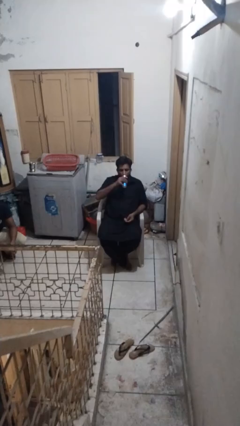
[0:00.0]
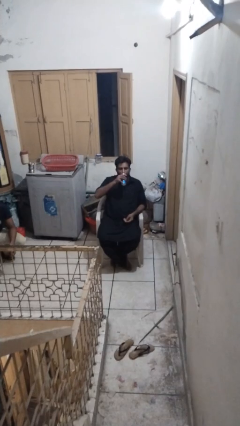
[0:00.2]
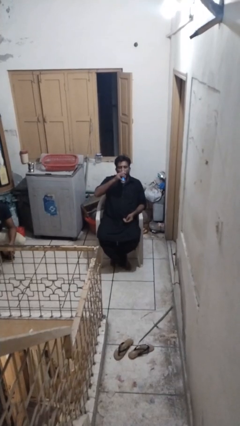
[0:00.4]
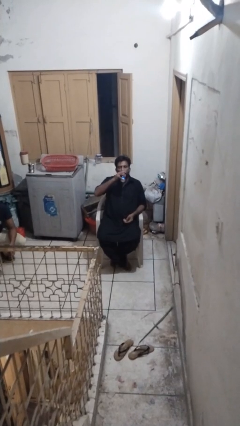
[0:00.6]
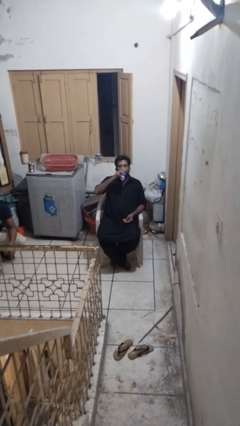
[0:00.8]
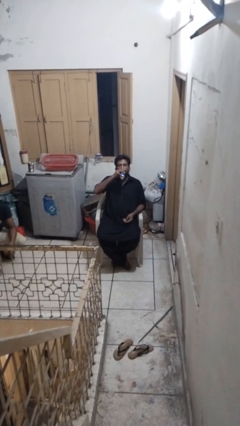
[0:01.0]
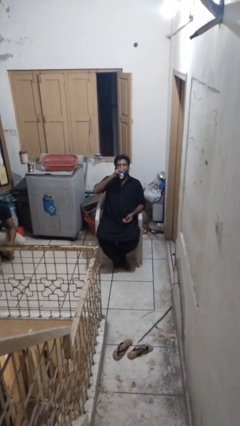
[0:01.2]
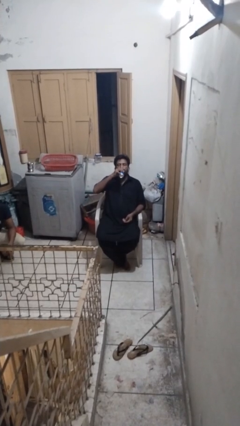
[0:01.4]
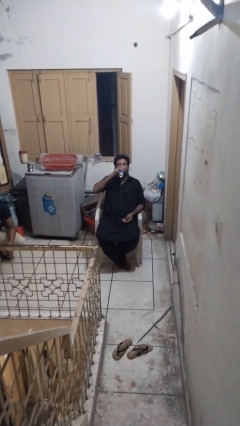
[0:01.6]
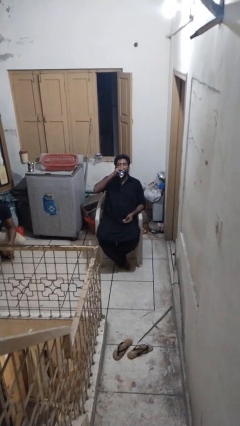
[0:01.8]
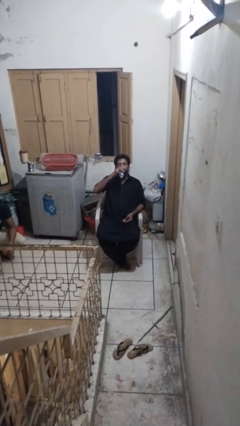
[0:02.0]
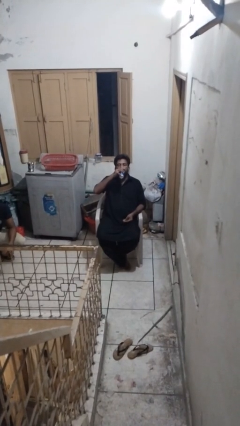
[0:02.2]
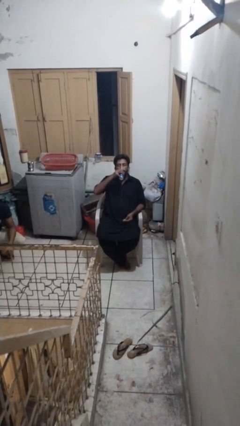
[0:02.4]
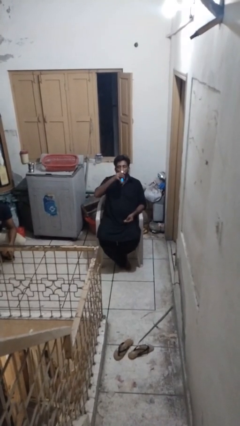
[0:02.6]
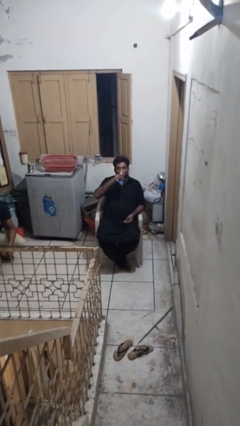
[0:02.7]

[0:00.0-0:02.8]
person drinks from beverage can

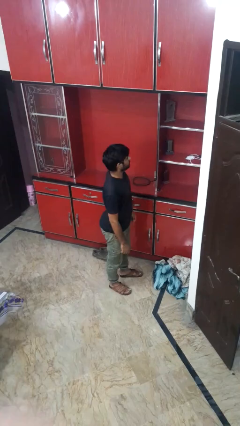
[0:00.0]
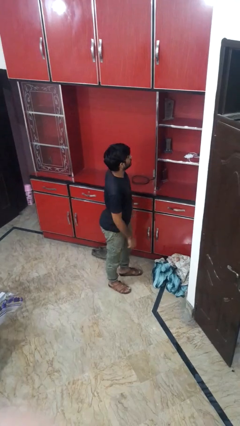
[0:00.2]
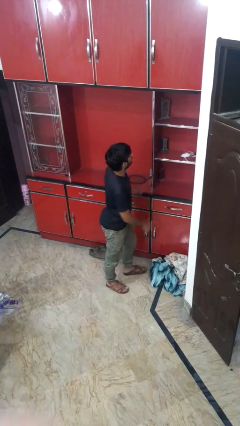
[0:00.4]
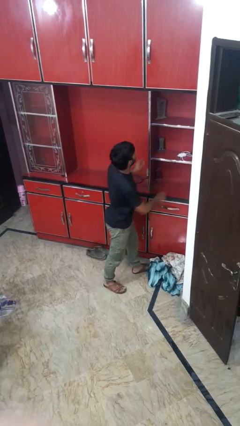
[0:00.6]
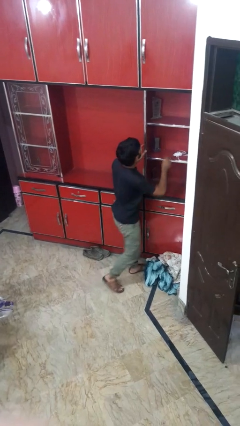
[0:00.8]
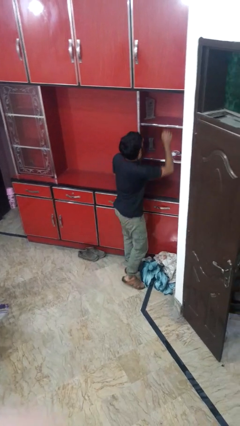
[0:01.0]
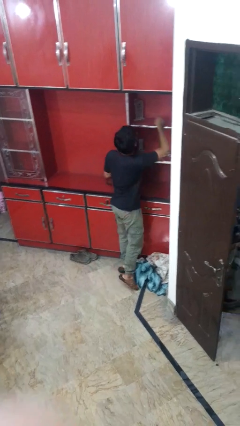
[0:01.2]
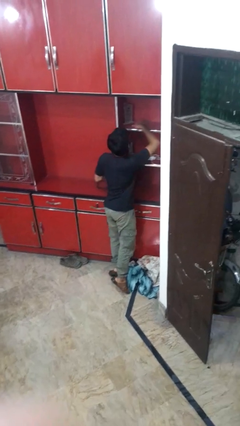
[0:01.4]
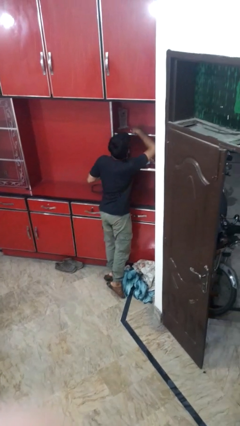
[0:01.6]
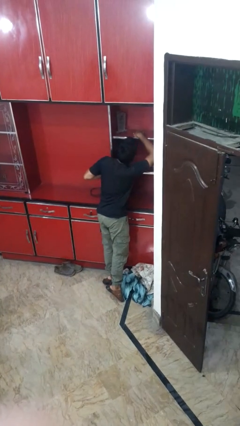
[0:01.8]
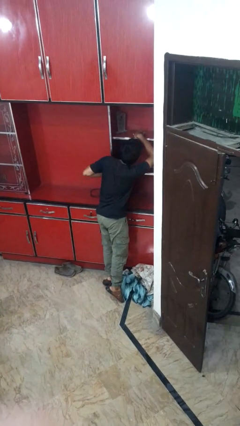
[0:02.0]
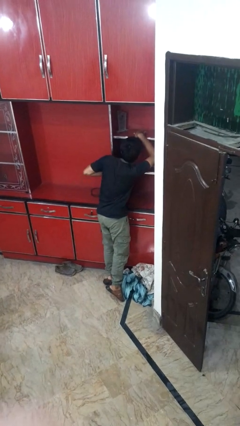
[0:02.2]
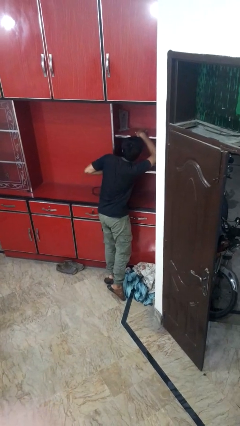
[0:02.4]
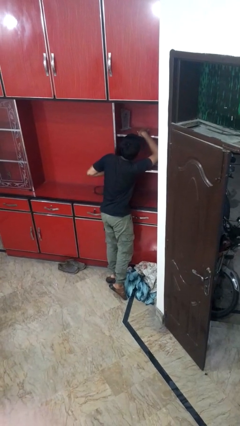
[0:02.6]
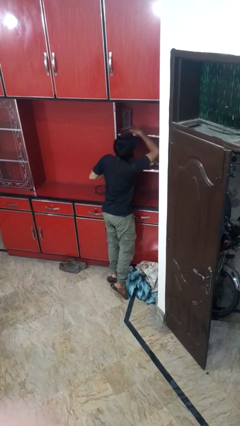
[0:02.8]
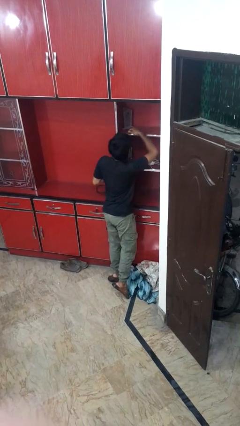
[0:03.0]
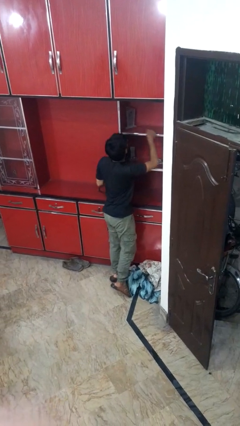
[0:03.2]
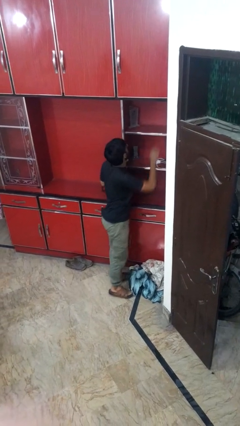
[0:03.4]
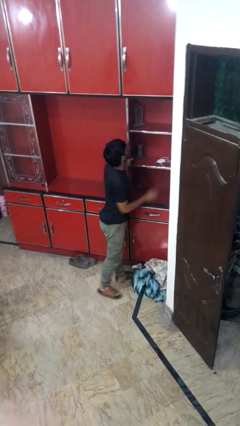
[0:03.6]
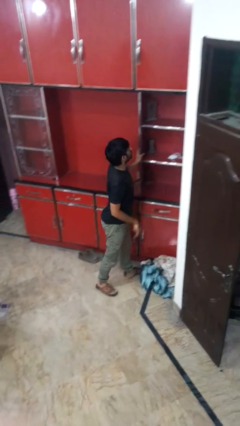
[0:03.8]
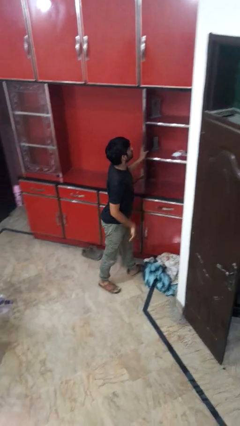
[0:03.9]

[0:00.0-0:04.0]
person searches in cabinet

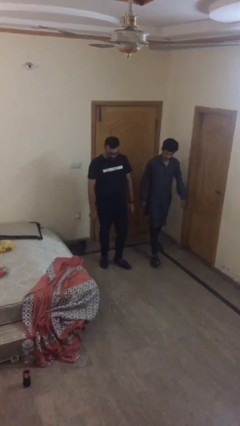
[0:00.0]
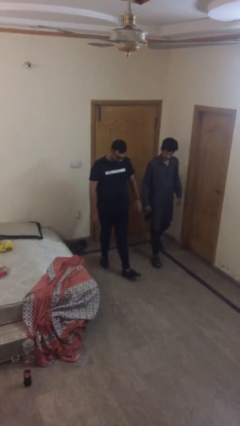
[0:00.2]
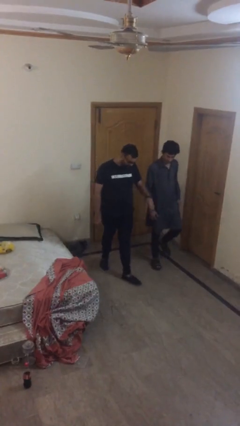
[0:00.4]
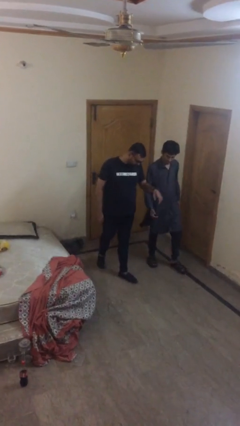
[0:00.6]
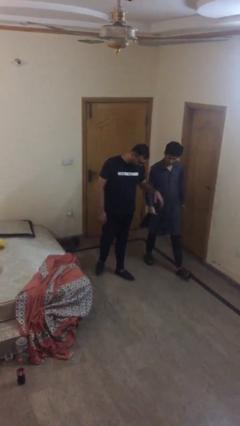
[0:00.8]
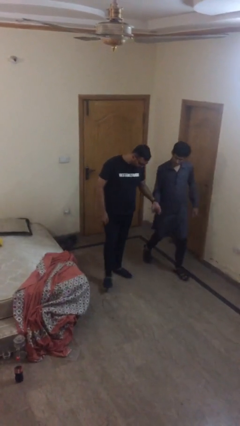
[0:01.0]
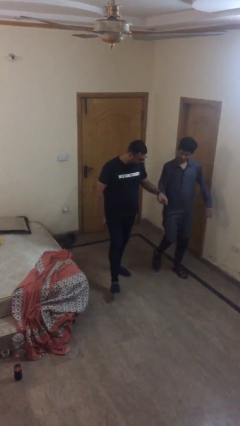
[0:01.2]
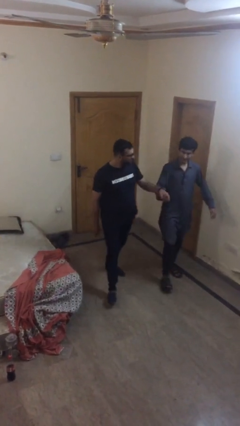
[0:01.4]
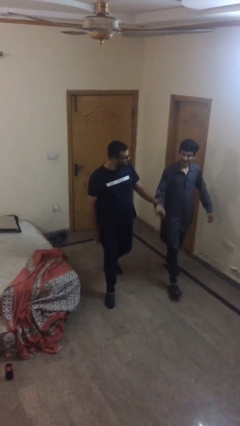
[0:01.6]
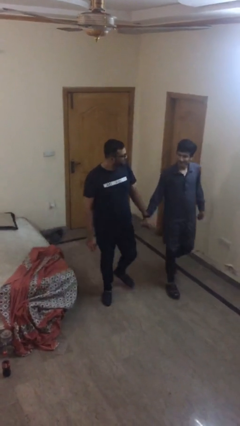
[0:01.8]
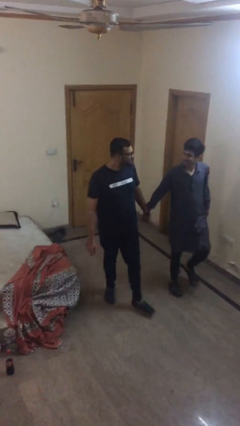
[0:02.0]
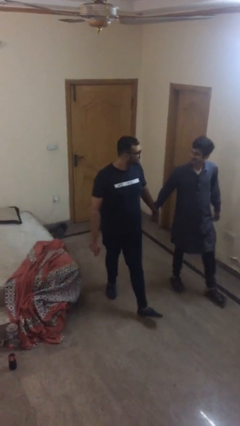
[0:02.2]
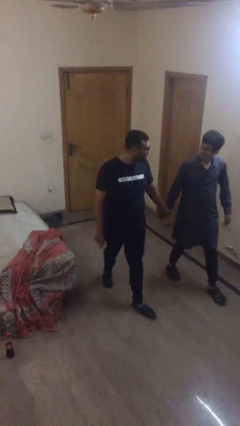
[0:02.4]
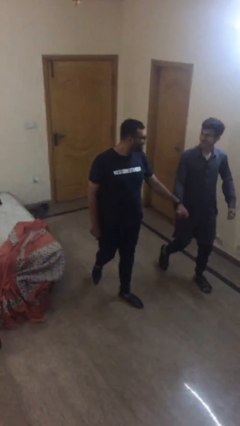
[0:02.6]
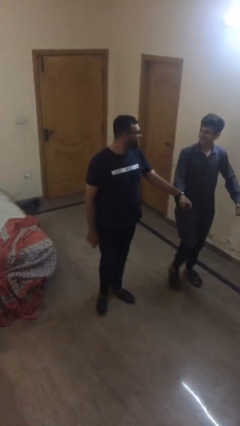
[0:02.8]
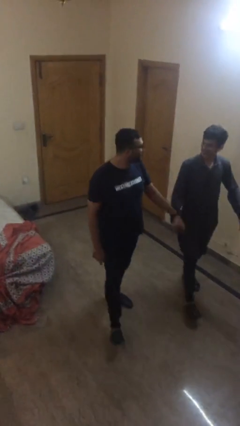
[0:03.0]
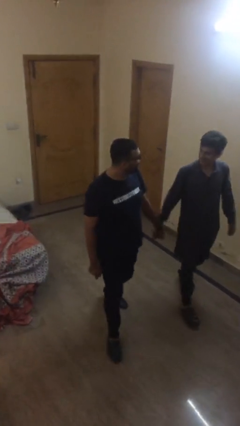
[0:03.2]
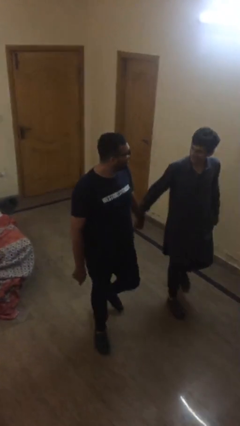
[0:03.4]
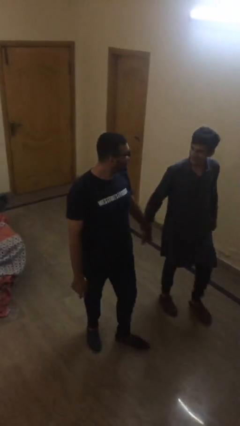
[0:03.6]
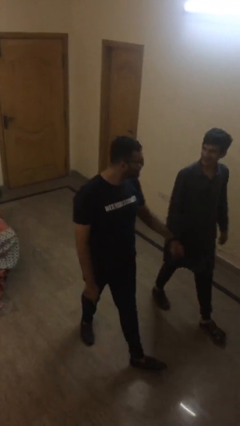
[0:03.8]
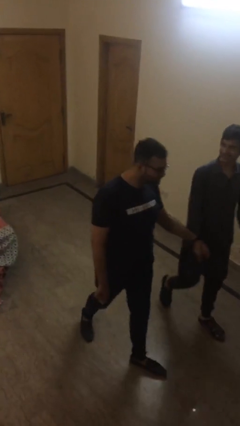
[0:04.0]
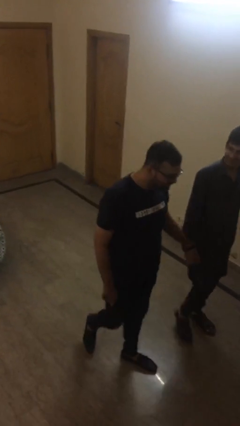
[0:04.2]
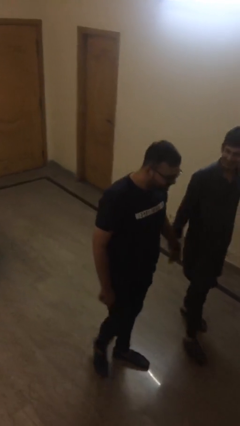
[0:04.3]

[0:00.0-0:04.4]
person holds hand

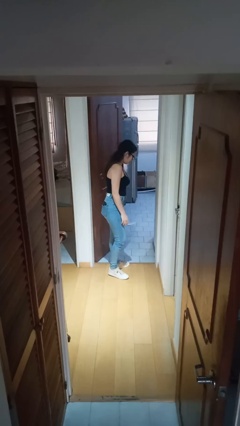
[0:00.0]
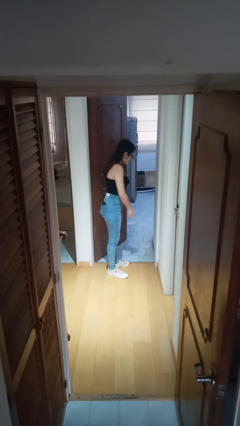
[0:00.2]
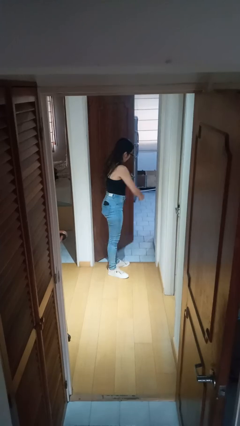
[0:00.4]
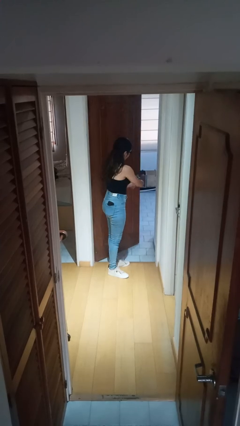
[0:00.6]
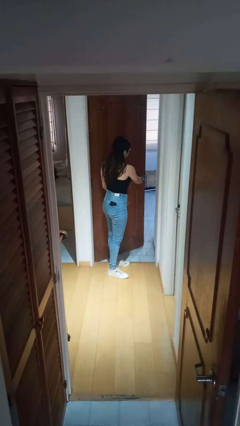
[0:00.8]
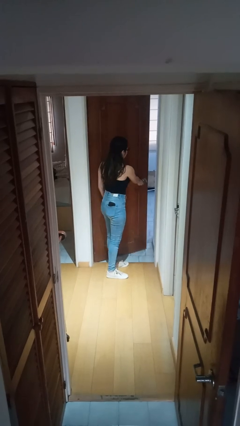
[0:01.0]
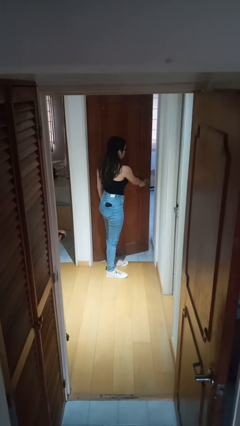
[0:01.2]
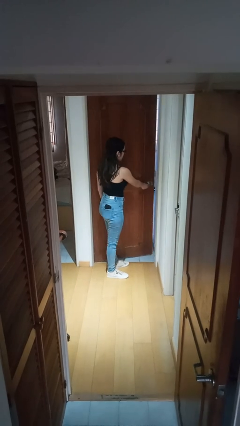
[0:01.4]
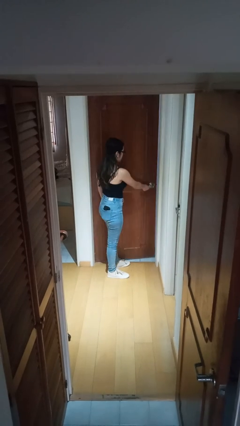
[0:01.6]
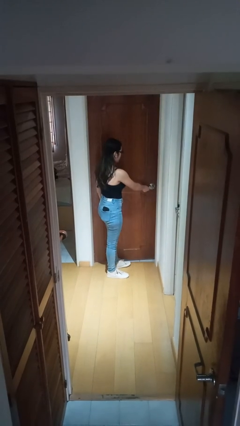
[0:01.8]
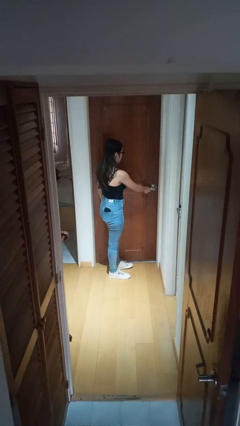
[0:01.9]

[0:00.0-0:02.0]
person closes facility door

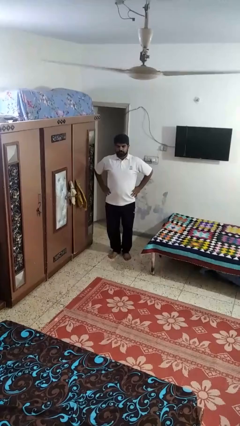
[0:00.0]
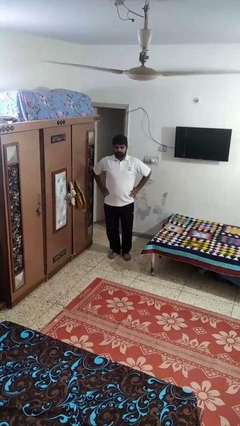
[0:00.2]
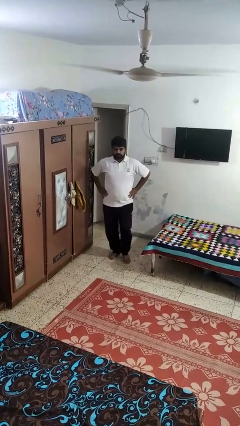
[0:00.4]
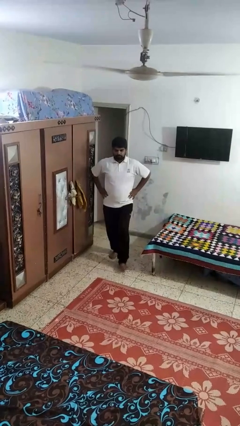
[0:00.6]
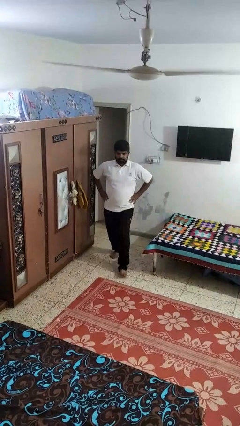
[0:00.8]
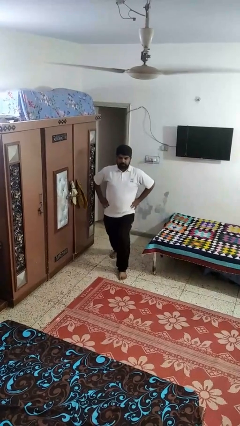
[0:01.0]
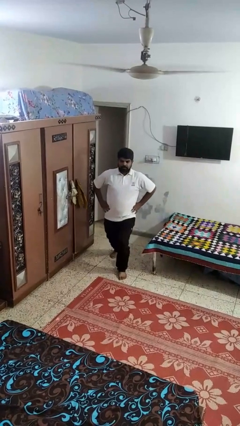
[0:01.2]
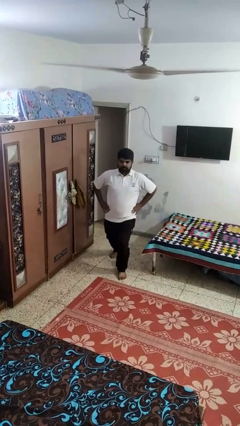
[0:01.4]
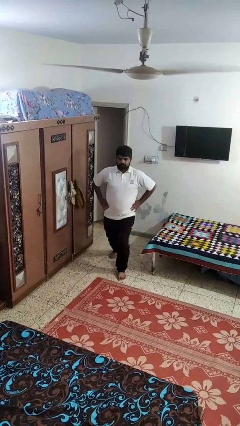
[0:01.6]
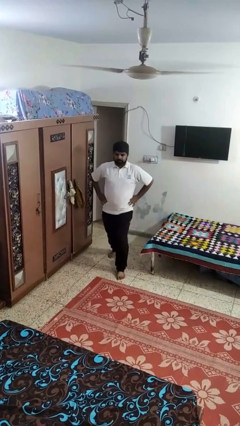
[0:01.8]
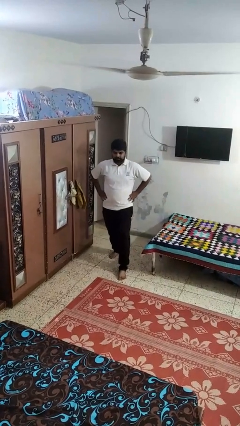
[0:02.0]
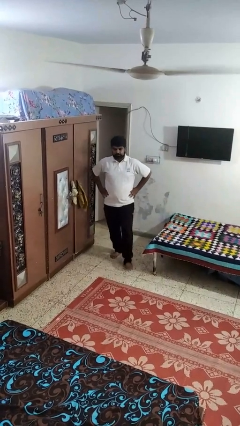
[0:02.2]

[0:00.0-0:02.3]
person exercises with lunges

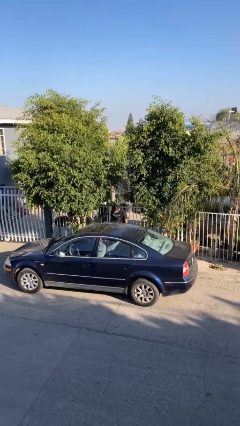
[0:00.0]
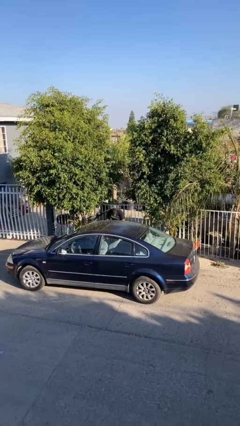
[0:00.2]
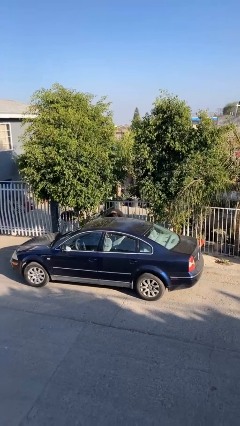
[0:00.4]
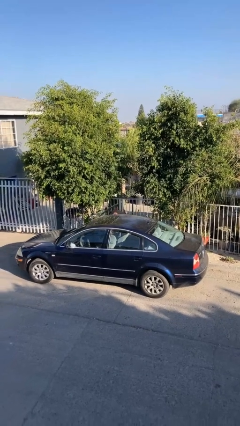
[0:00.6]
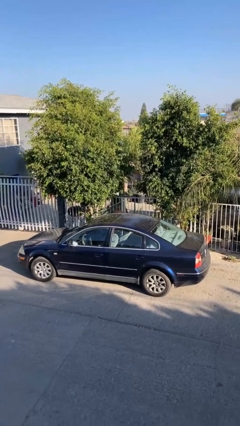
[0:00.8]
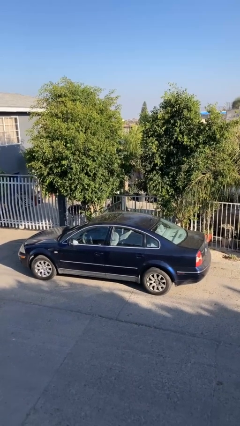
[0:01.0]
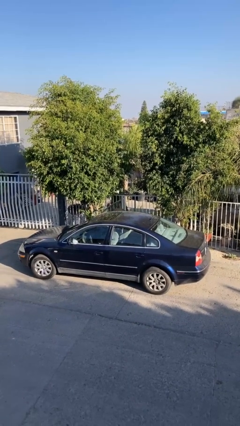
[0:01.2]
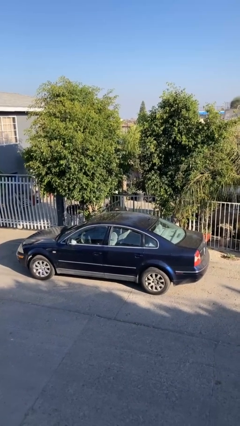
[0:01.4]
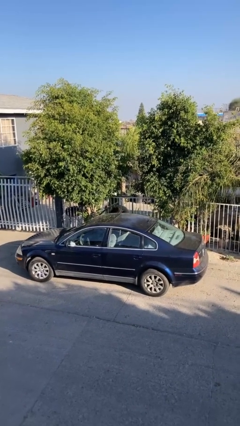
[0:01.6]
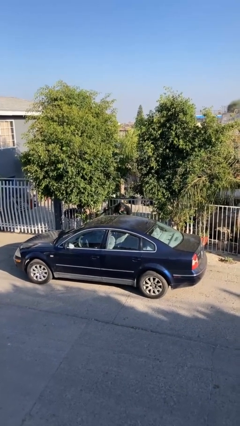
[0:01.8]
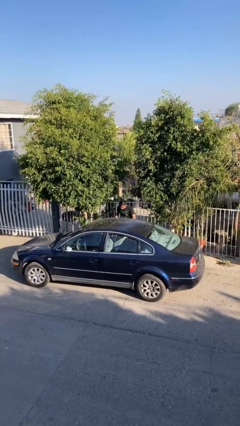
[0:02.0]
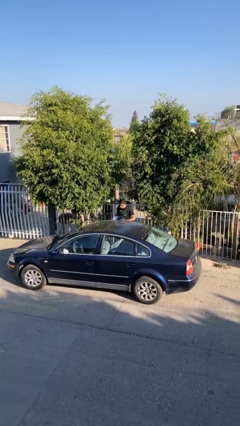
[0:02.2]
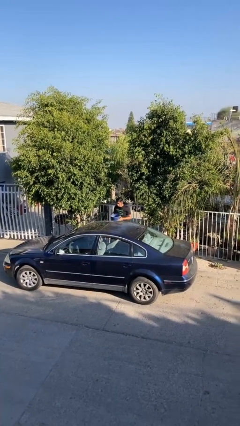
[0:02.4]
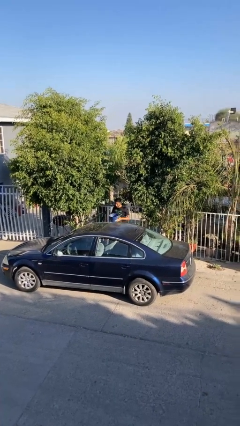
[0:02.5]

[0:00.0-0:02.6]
person unloads car
